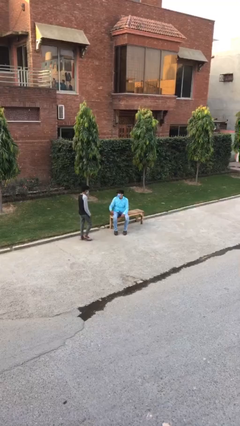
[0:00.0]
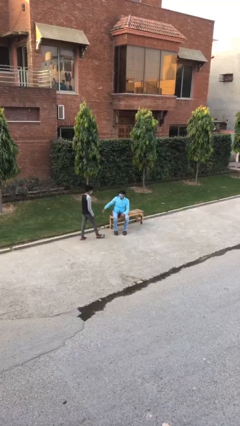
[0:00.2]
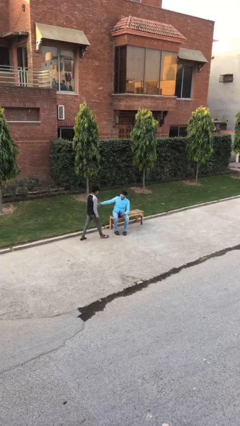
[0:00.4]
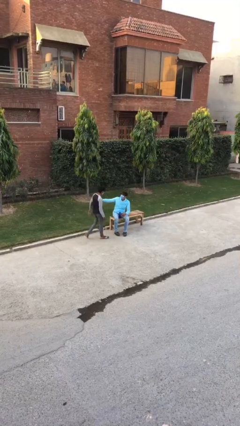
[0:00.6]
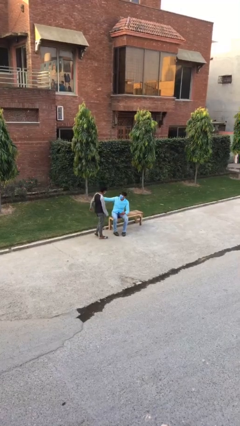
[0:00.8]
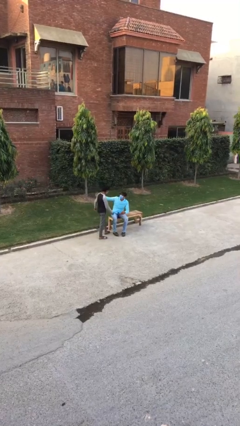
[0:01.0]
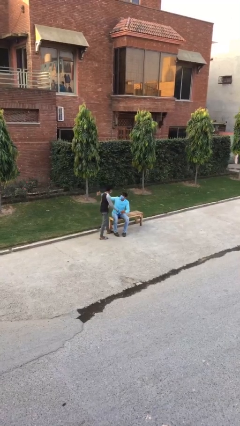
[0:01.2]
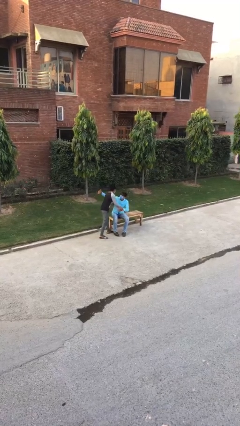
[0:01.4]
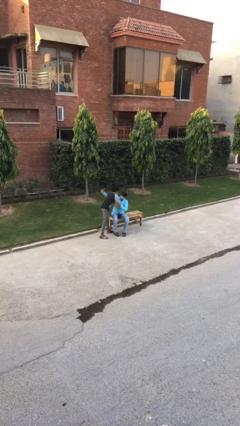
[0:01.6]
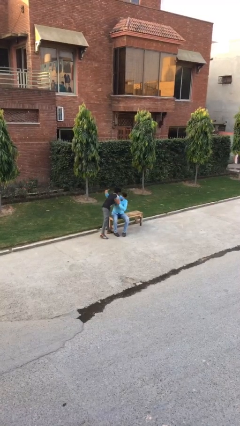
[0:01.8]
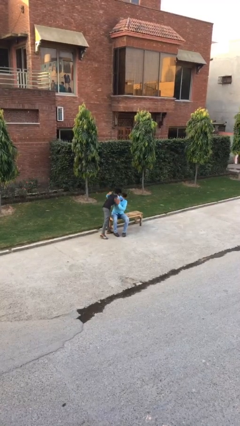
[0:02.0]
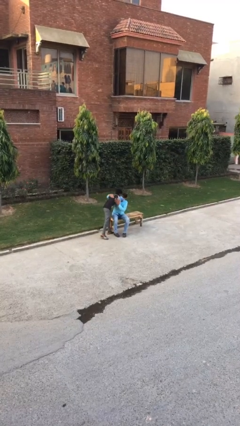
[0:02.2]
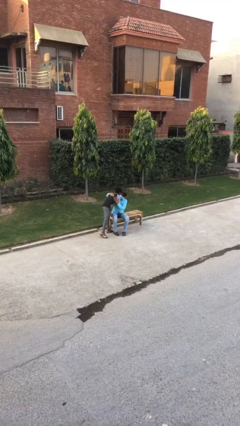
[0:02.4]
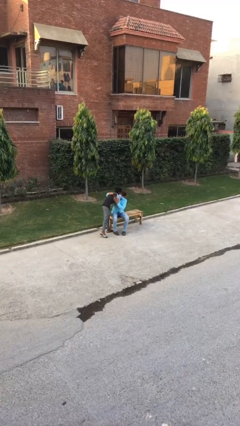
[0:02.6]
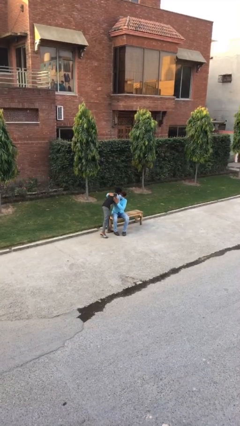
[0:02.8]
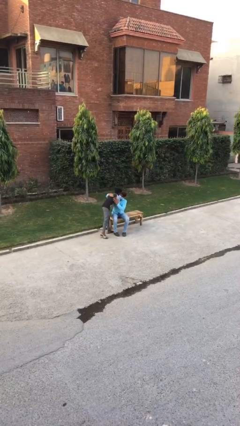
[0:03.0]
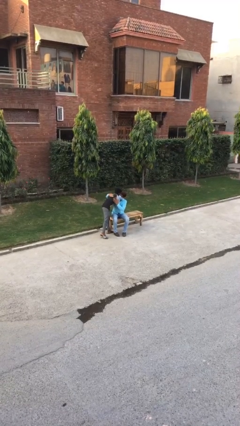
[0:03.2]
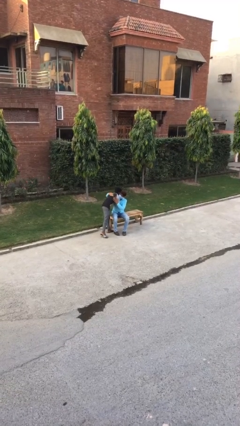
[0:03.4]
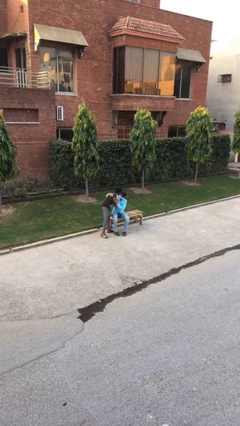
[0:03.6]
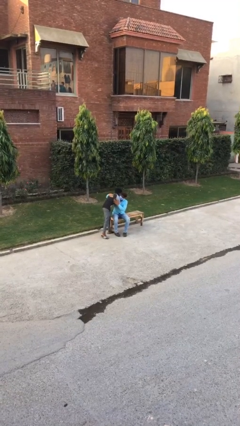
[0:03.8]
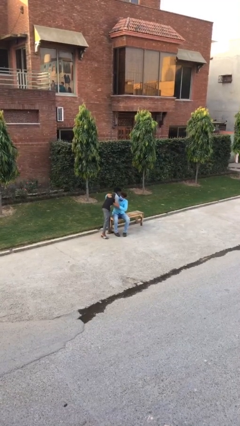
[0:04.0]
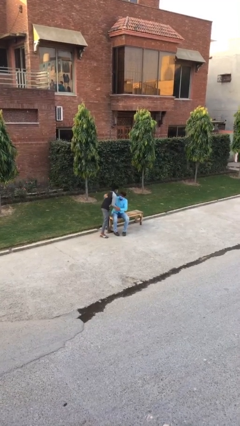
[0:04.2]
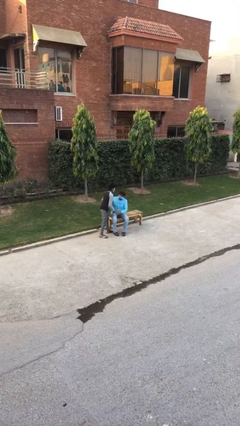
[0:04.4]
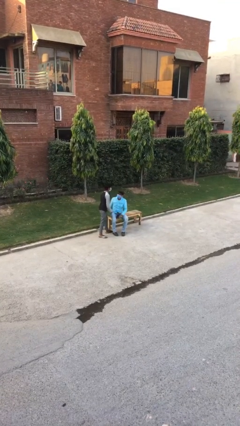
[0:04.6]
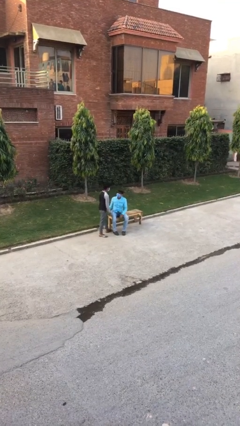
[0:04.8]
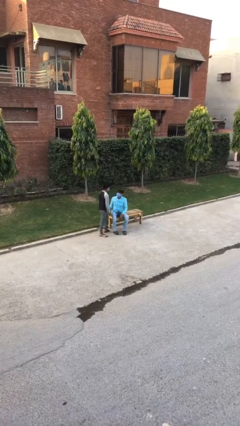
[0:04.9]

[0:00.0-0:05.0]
person embraces person

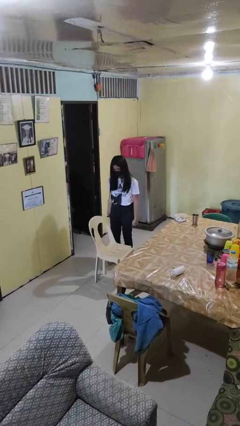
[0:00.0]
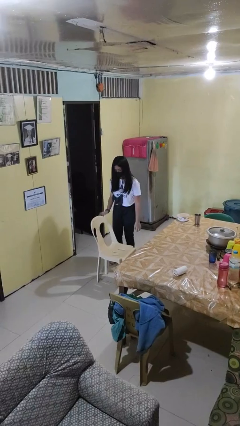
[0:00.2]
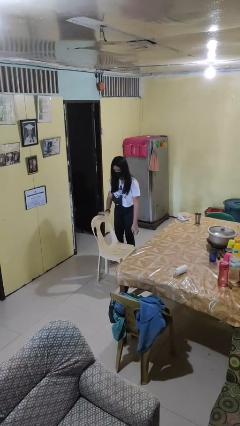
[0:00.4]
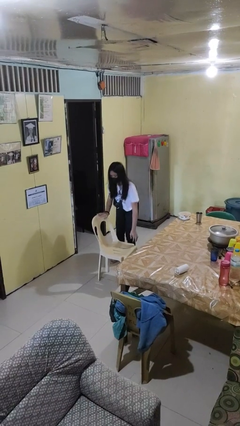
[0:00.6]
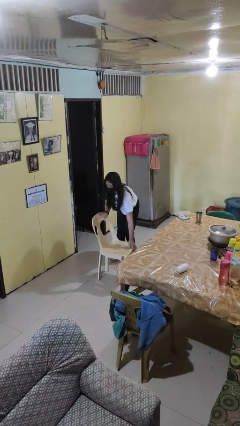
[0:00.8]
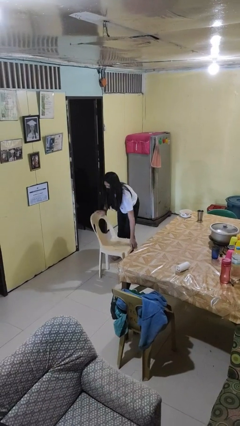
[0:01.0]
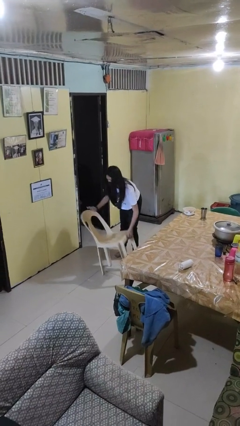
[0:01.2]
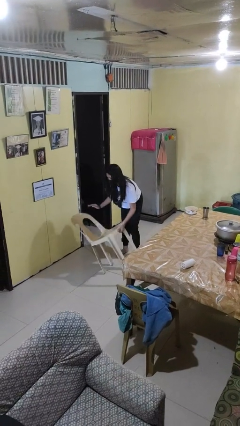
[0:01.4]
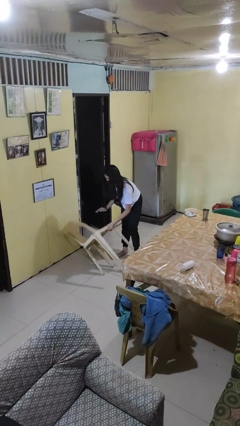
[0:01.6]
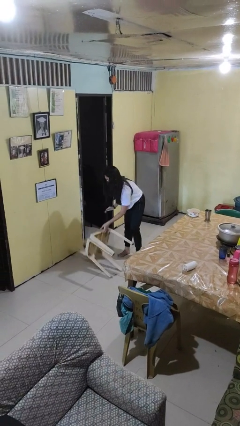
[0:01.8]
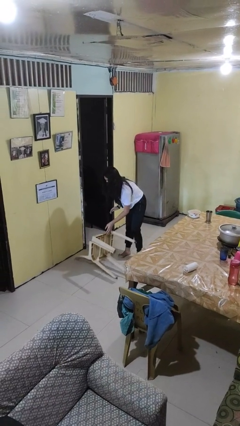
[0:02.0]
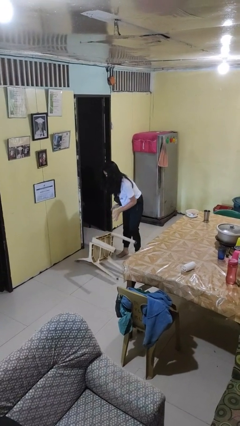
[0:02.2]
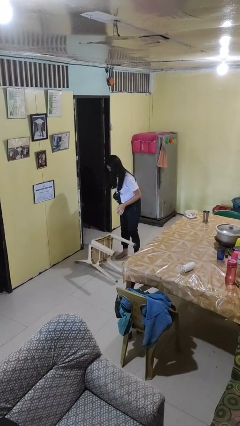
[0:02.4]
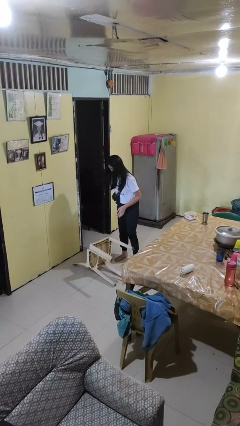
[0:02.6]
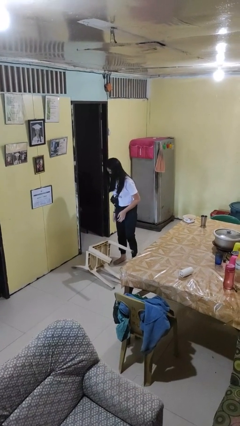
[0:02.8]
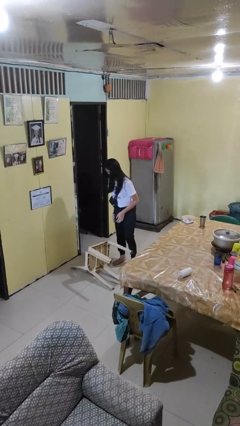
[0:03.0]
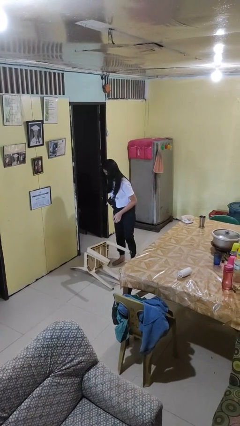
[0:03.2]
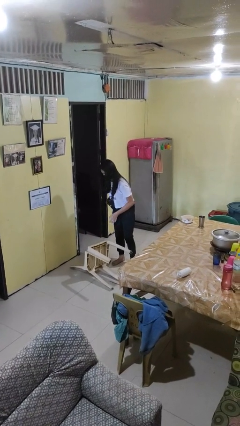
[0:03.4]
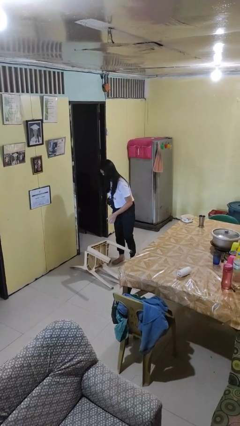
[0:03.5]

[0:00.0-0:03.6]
person knocks over furniture

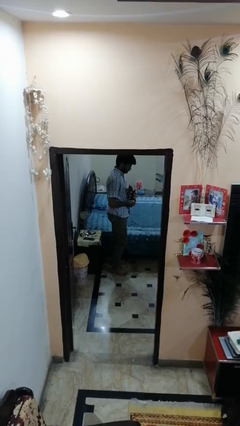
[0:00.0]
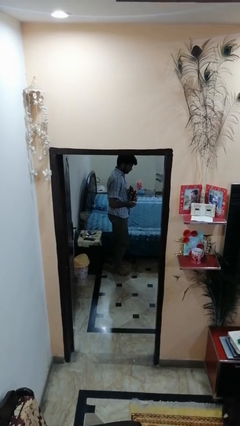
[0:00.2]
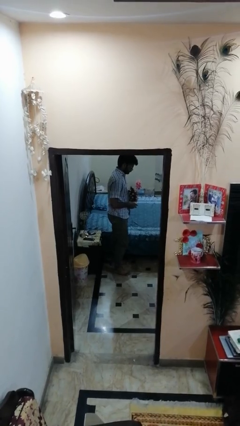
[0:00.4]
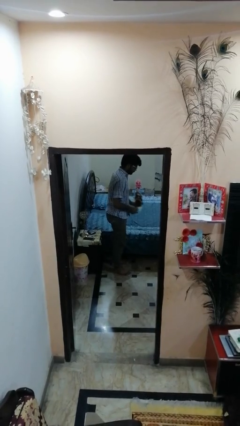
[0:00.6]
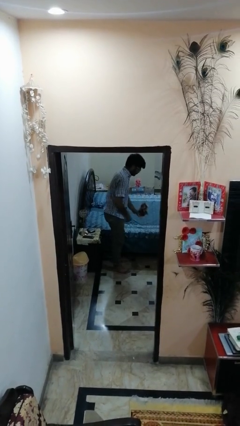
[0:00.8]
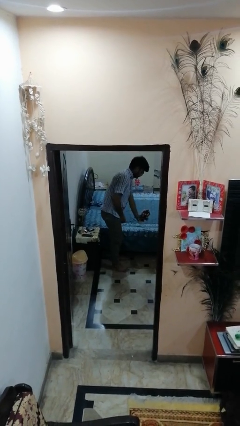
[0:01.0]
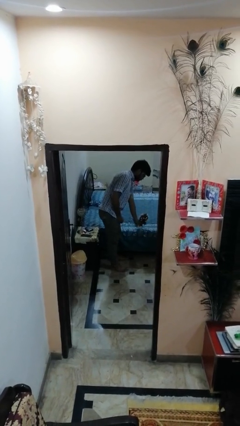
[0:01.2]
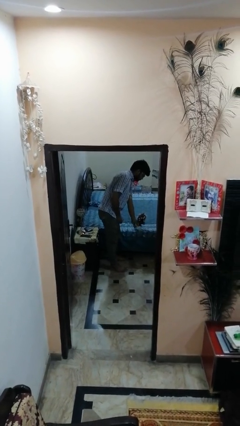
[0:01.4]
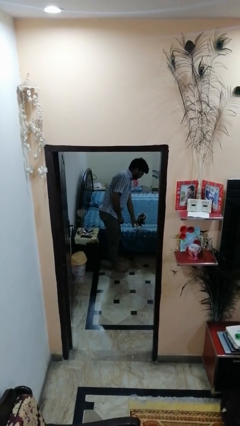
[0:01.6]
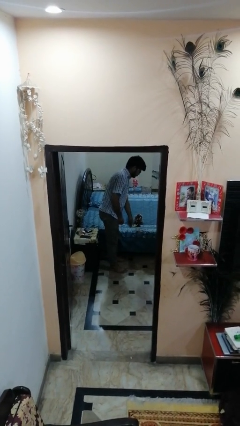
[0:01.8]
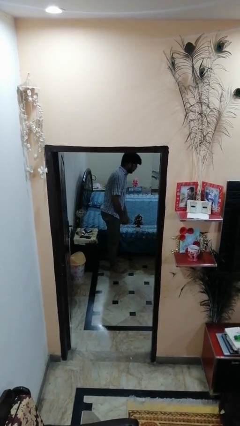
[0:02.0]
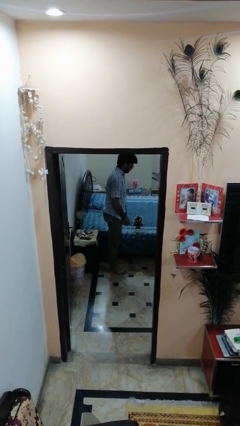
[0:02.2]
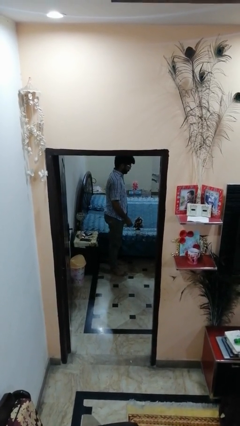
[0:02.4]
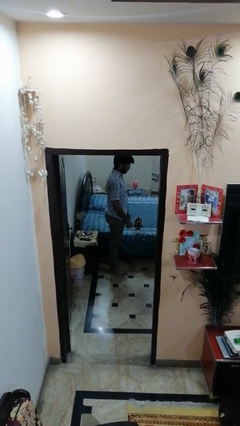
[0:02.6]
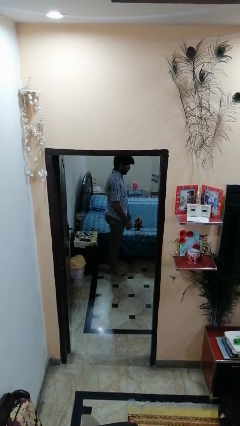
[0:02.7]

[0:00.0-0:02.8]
person puts down object on bed

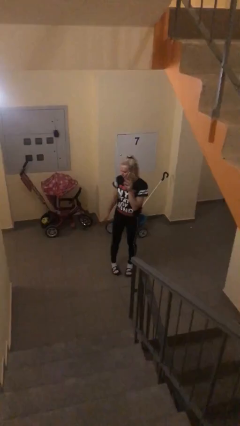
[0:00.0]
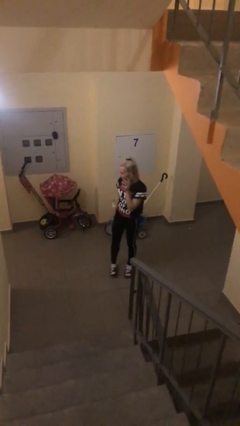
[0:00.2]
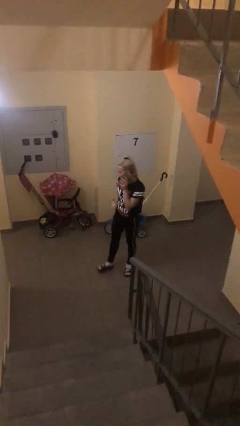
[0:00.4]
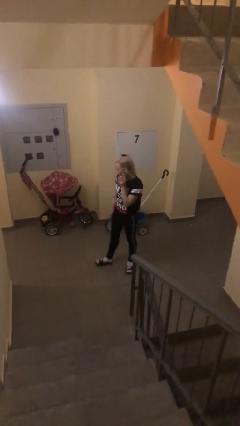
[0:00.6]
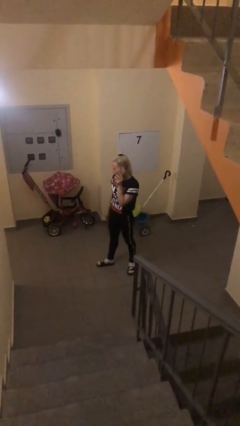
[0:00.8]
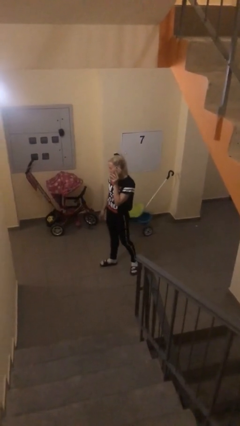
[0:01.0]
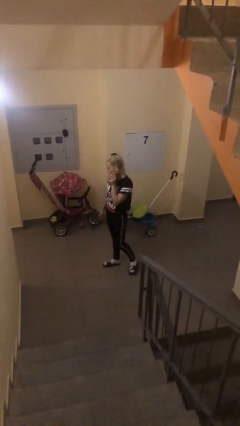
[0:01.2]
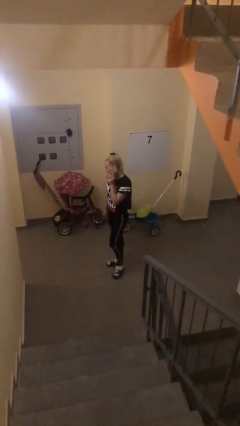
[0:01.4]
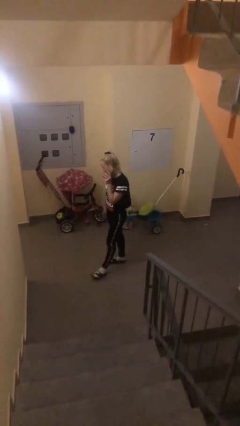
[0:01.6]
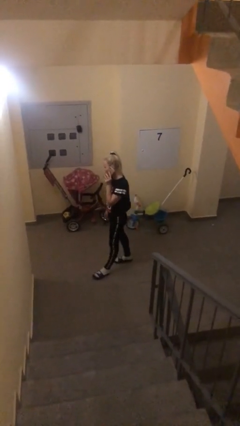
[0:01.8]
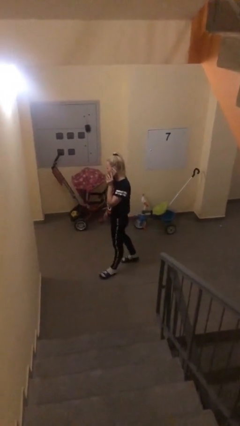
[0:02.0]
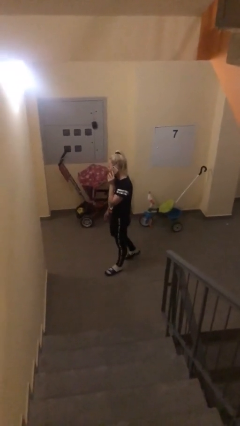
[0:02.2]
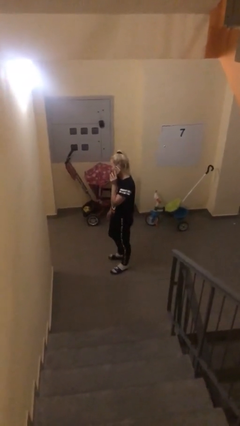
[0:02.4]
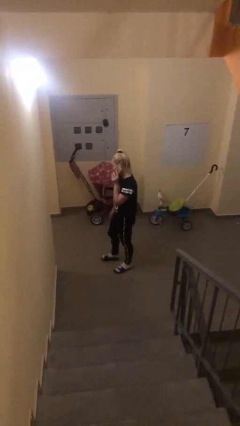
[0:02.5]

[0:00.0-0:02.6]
person talks on phone

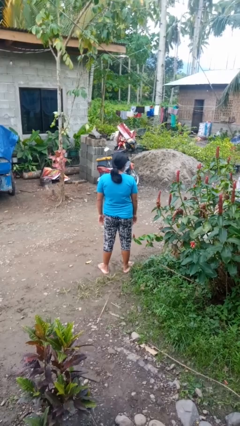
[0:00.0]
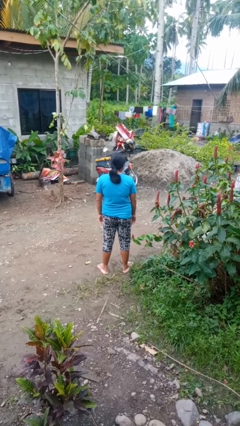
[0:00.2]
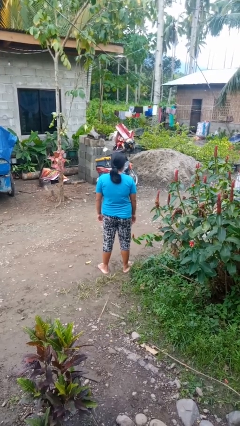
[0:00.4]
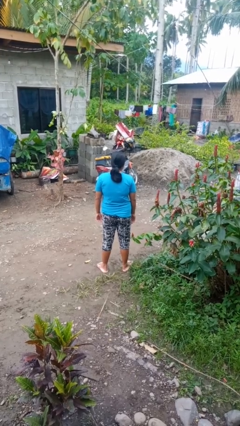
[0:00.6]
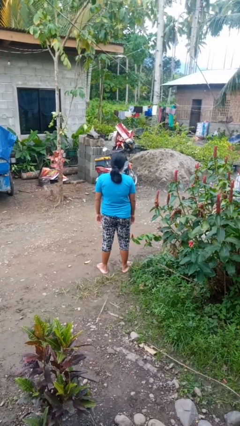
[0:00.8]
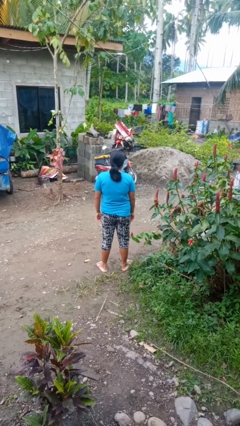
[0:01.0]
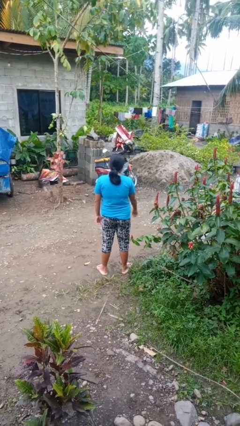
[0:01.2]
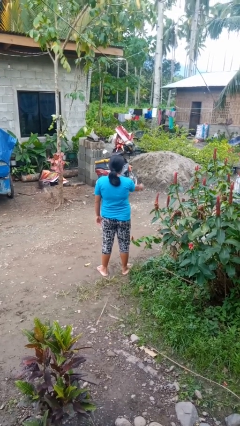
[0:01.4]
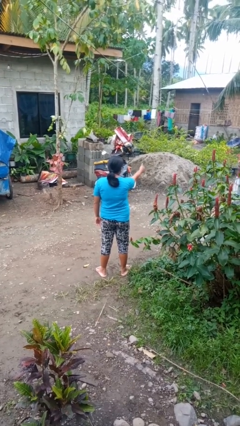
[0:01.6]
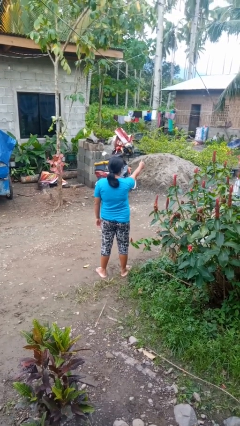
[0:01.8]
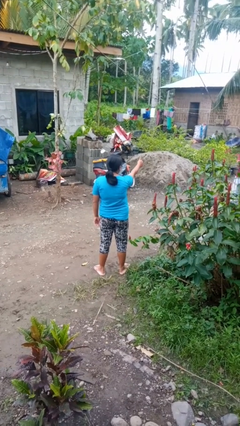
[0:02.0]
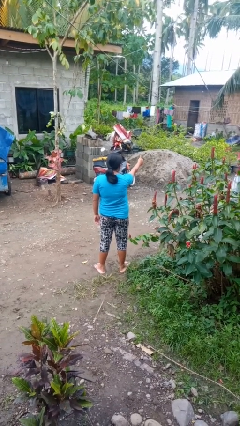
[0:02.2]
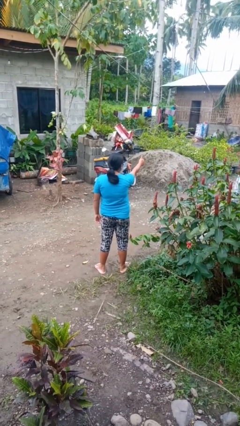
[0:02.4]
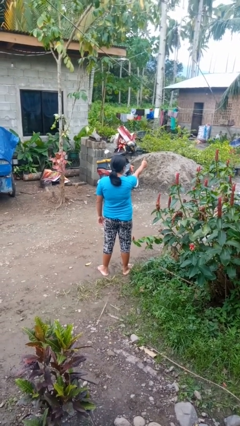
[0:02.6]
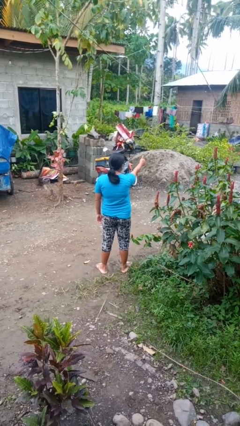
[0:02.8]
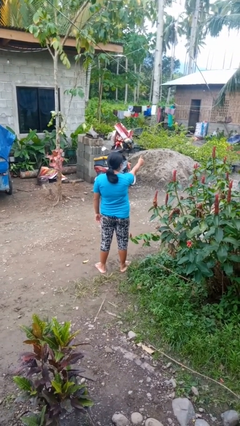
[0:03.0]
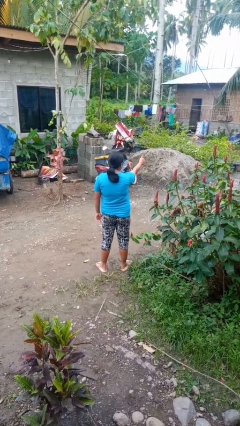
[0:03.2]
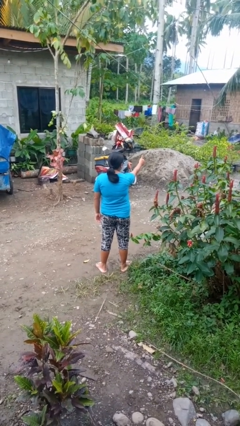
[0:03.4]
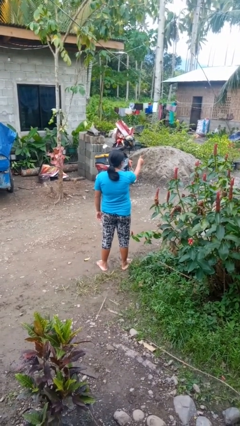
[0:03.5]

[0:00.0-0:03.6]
person gestures thumbs up
